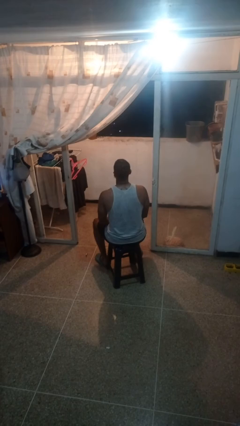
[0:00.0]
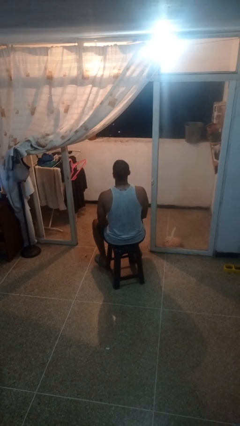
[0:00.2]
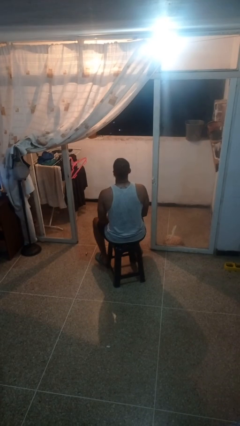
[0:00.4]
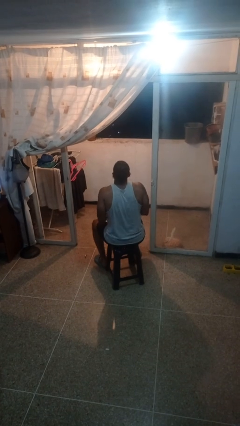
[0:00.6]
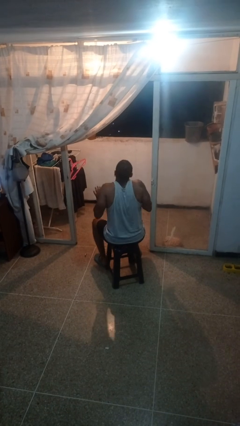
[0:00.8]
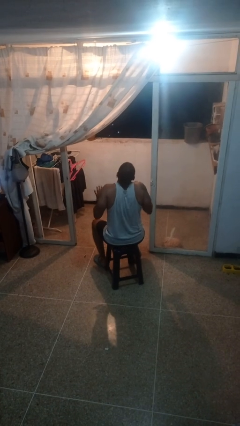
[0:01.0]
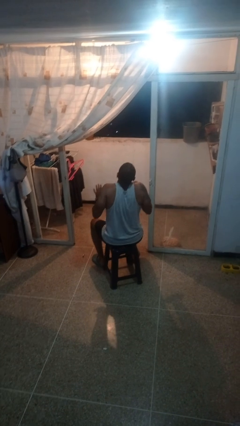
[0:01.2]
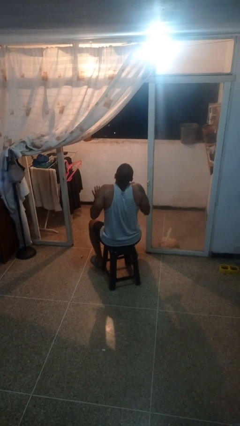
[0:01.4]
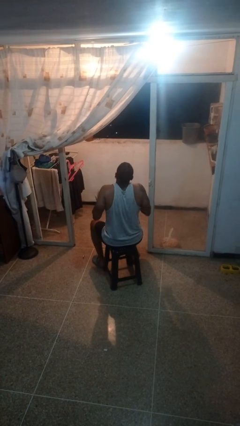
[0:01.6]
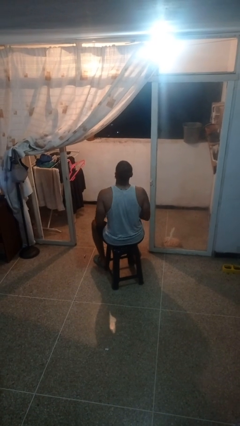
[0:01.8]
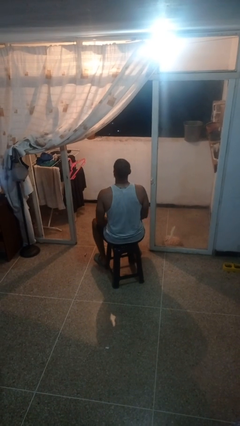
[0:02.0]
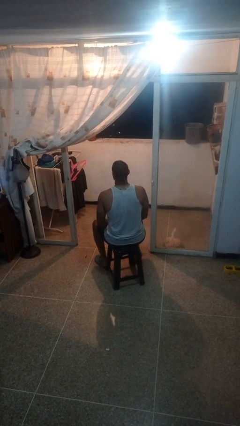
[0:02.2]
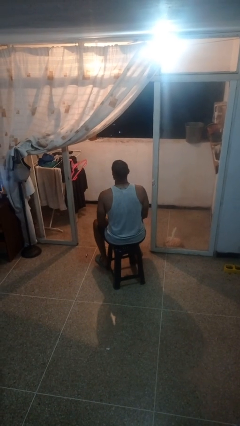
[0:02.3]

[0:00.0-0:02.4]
person shrugs

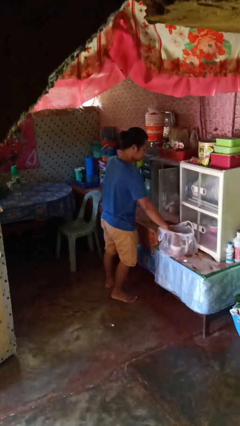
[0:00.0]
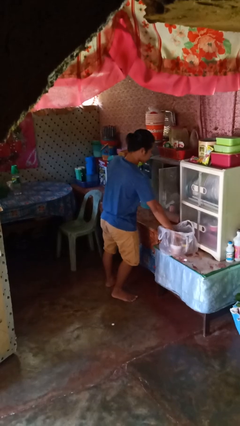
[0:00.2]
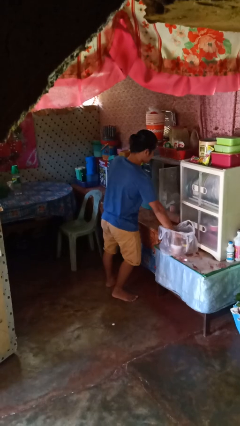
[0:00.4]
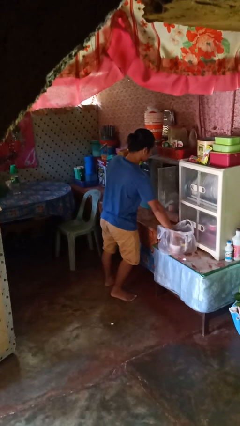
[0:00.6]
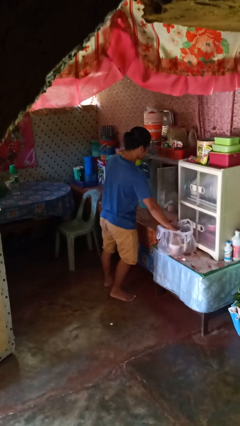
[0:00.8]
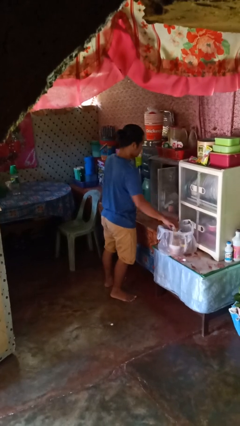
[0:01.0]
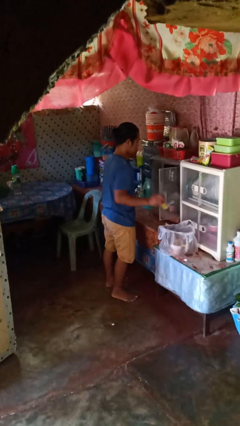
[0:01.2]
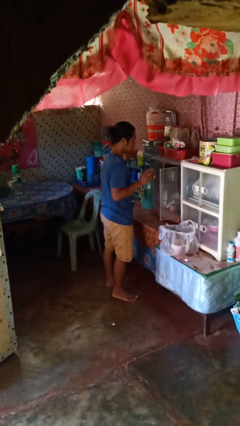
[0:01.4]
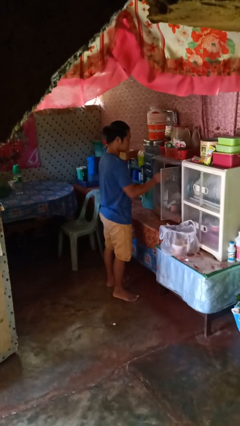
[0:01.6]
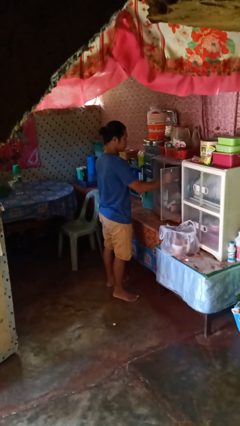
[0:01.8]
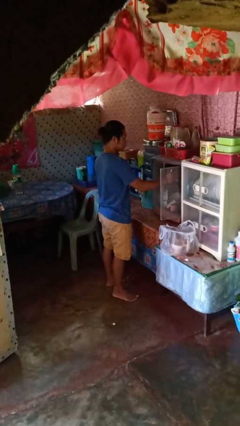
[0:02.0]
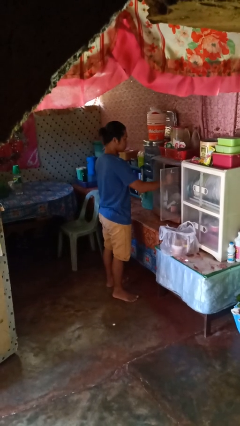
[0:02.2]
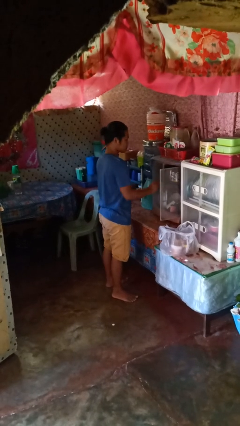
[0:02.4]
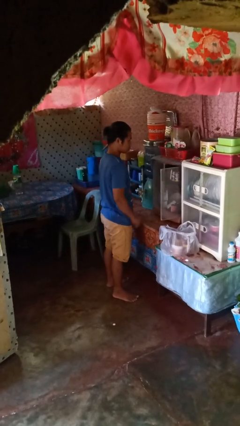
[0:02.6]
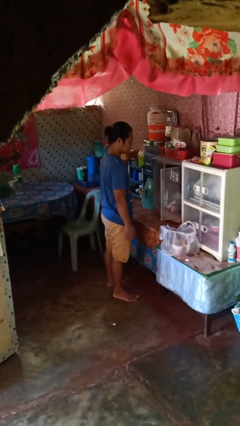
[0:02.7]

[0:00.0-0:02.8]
person loads groceries into cabinet

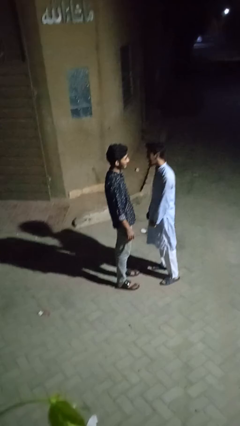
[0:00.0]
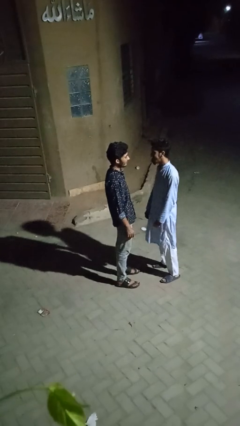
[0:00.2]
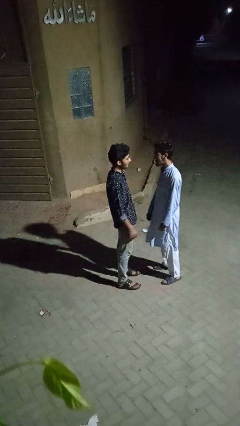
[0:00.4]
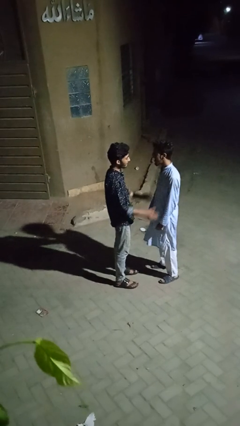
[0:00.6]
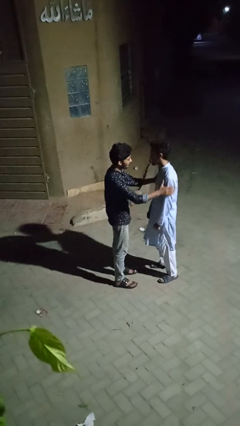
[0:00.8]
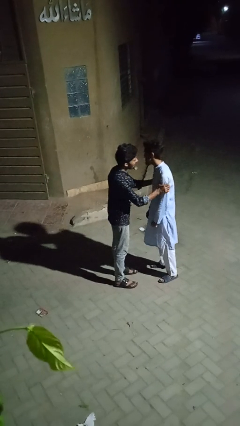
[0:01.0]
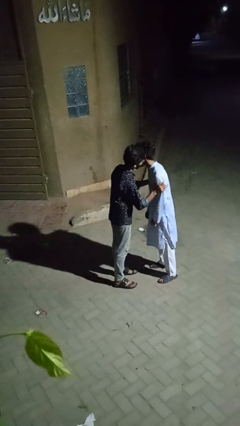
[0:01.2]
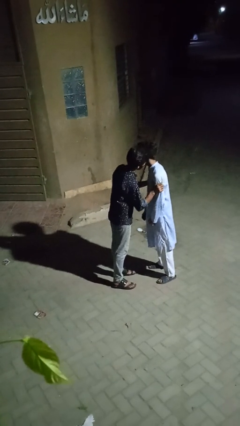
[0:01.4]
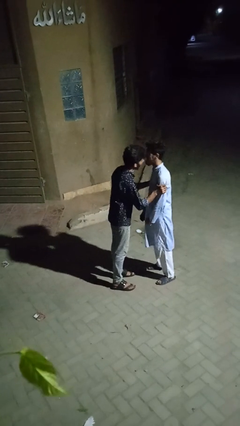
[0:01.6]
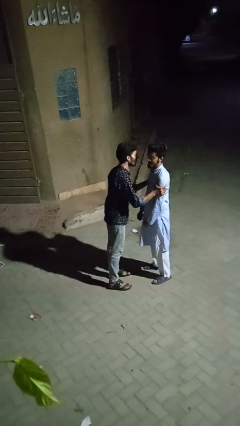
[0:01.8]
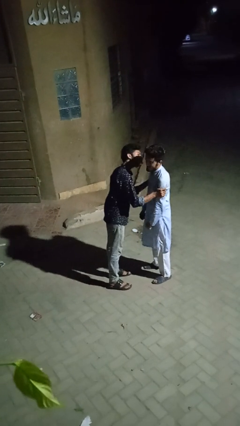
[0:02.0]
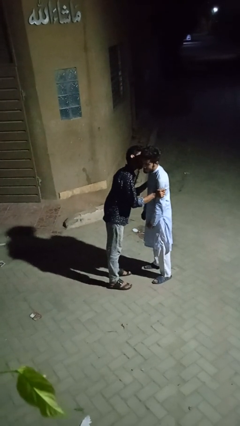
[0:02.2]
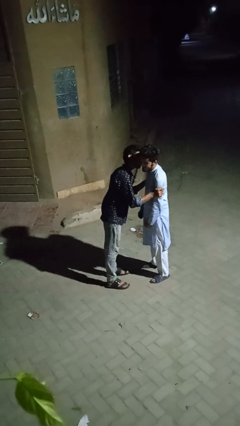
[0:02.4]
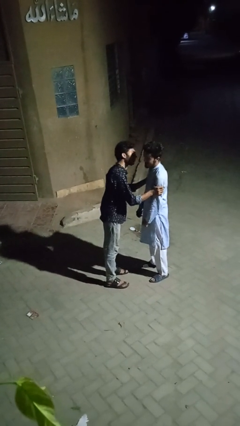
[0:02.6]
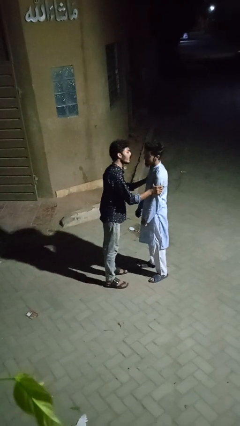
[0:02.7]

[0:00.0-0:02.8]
person kisses cheek of person

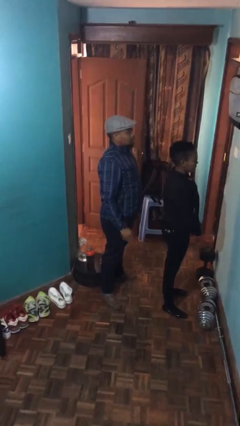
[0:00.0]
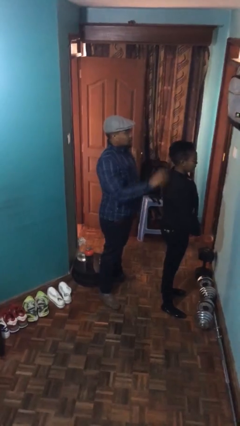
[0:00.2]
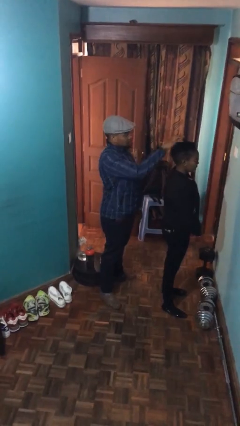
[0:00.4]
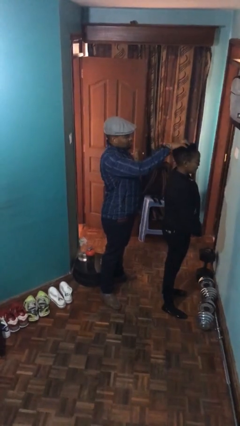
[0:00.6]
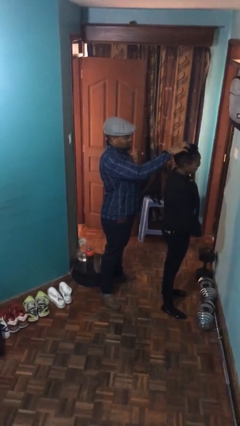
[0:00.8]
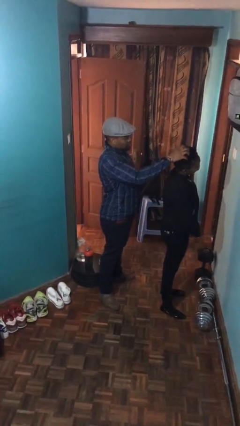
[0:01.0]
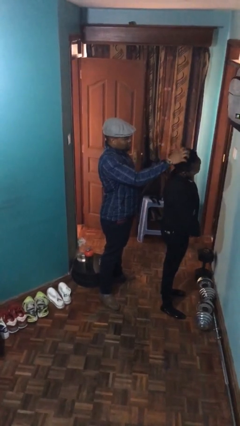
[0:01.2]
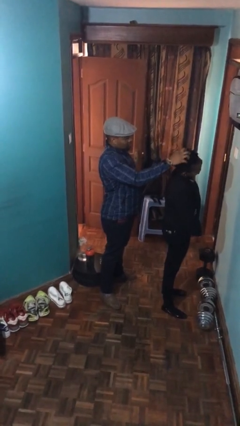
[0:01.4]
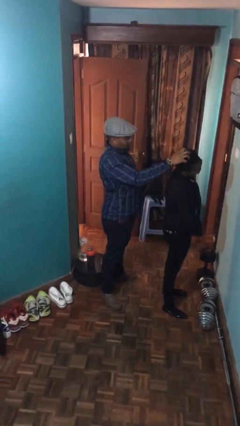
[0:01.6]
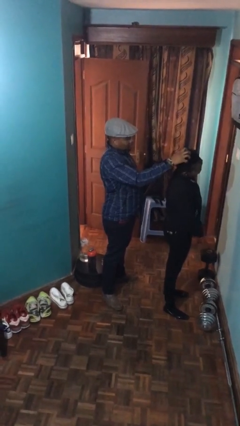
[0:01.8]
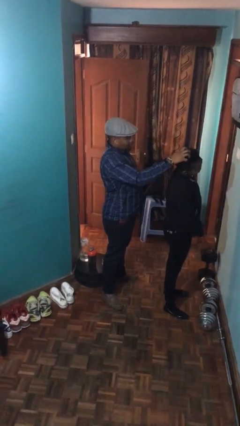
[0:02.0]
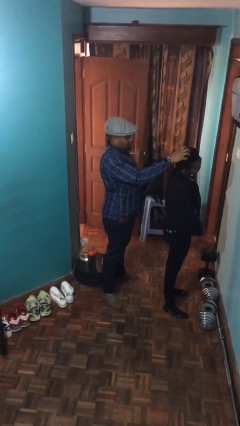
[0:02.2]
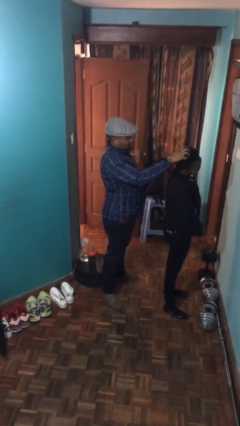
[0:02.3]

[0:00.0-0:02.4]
person grabs person by hair

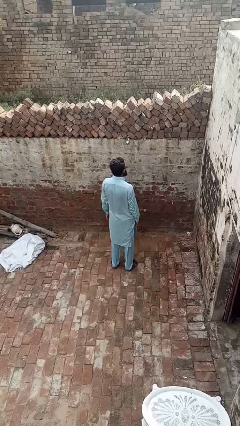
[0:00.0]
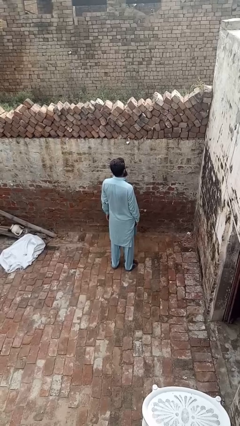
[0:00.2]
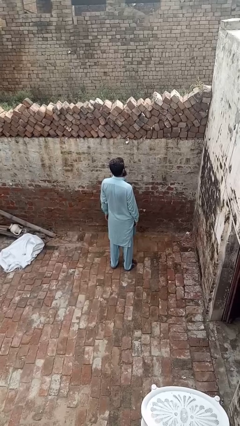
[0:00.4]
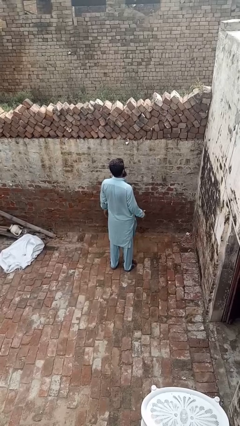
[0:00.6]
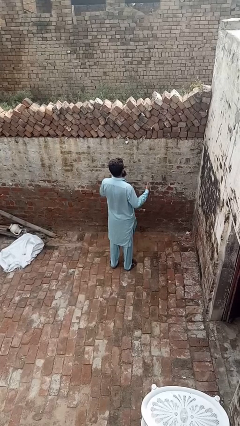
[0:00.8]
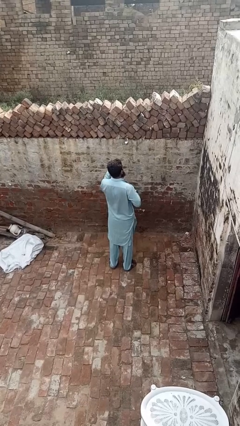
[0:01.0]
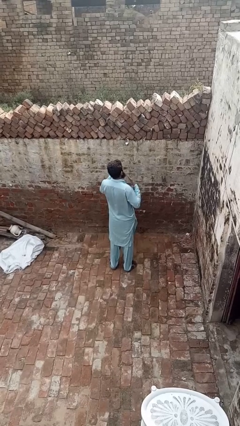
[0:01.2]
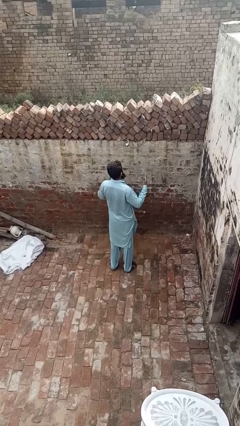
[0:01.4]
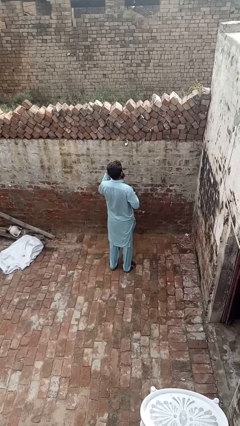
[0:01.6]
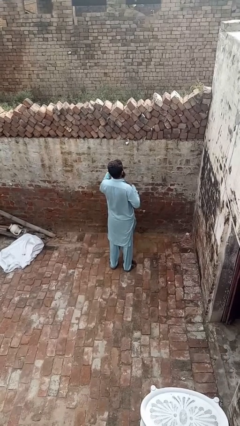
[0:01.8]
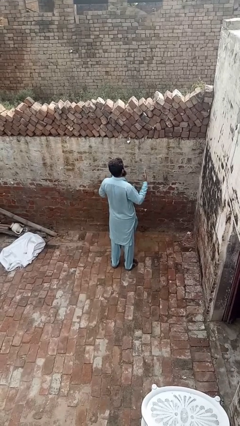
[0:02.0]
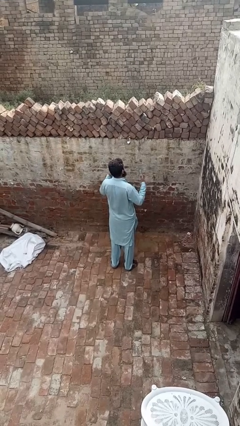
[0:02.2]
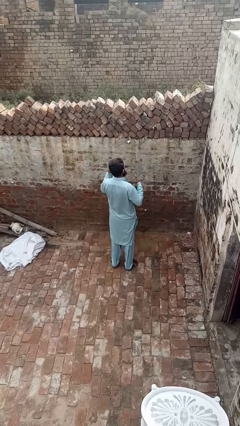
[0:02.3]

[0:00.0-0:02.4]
person drums on chest

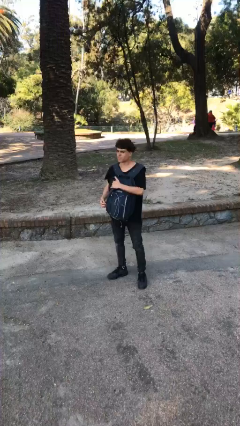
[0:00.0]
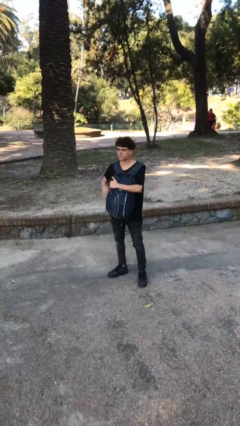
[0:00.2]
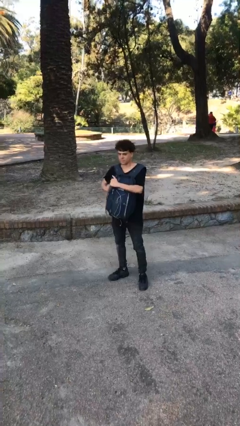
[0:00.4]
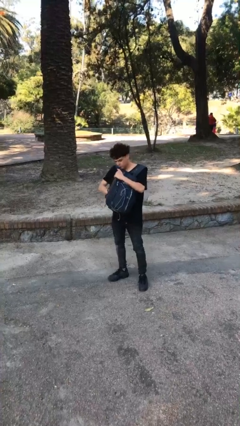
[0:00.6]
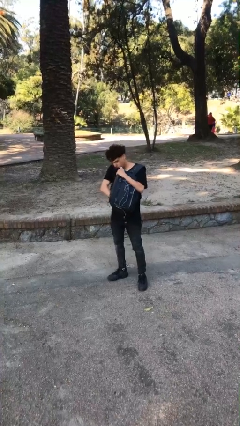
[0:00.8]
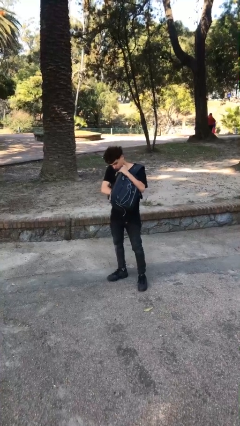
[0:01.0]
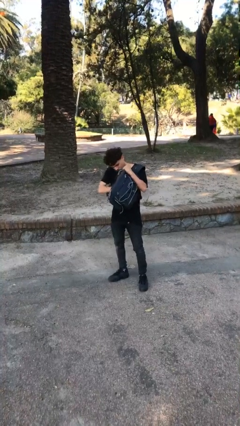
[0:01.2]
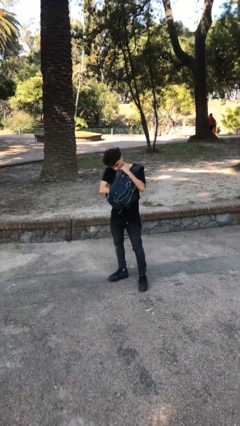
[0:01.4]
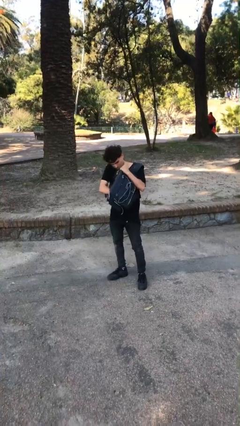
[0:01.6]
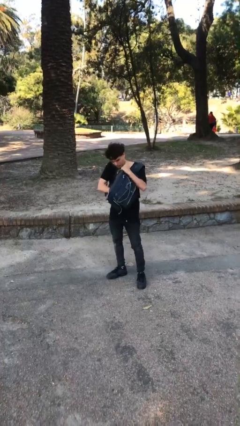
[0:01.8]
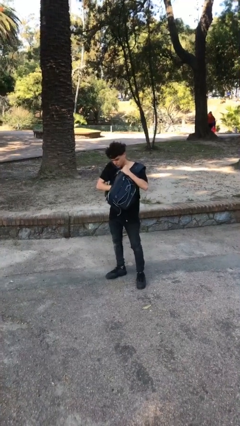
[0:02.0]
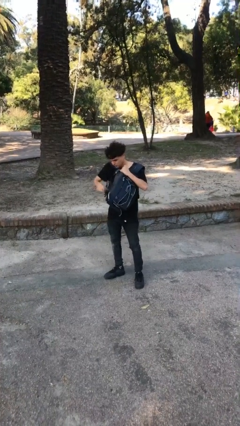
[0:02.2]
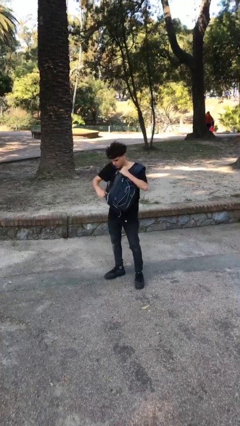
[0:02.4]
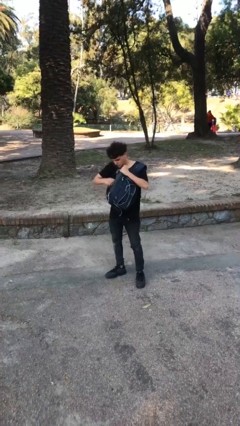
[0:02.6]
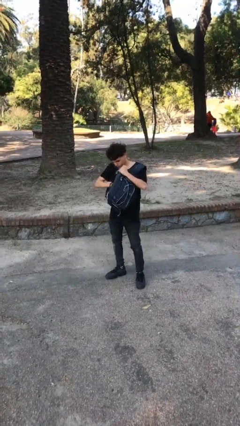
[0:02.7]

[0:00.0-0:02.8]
person searches in backpack

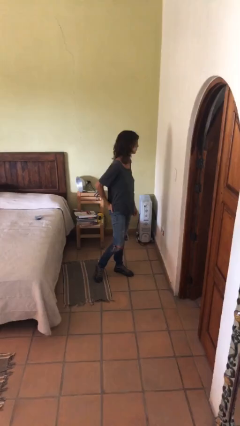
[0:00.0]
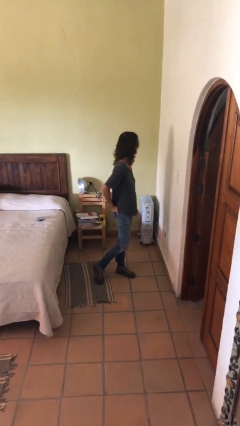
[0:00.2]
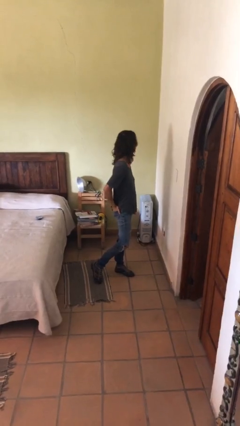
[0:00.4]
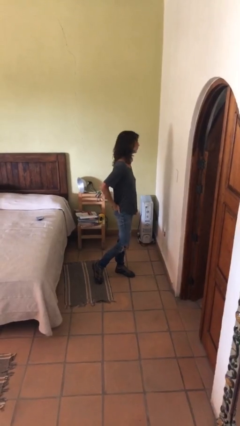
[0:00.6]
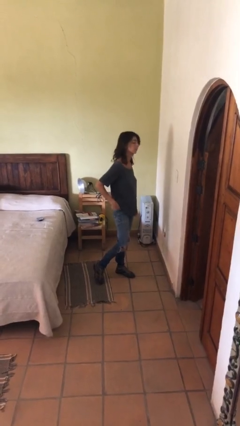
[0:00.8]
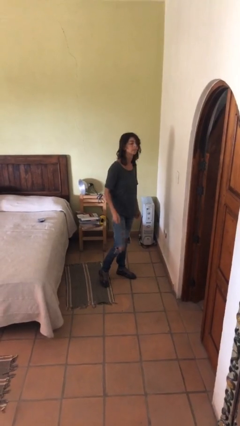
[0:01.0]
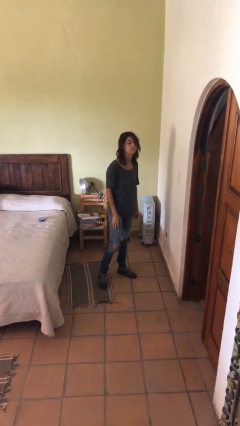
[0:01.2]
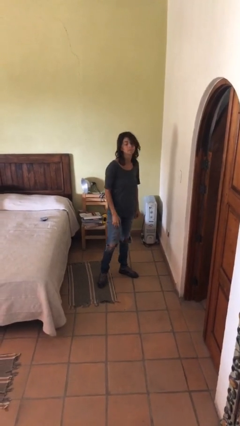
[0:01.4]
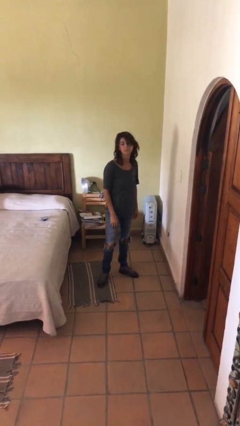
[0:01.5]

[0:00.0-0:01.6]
person puts hands in back pockets
